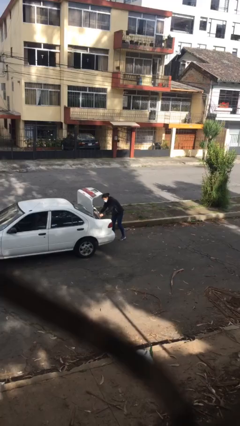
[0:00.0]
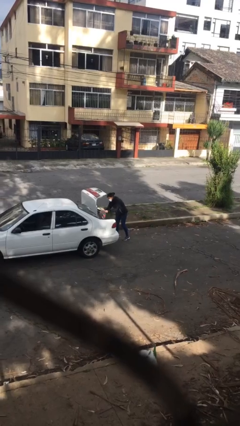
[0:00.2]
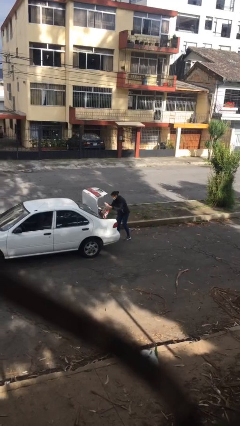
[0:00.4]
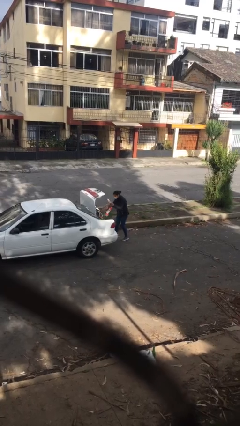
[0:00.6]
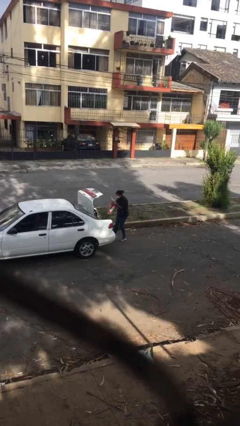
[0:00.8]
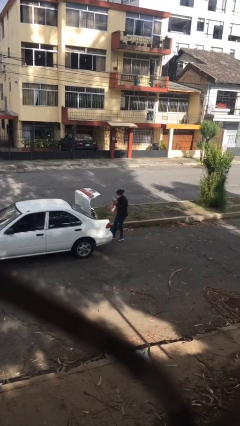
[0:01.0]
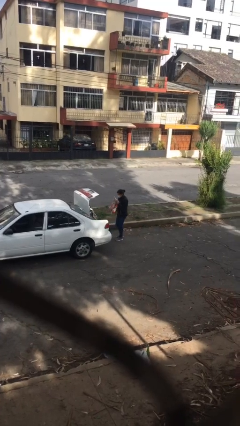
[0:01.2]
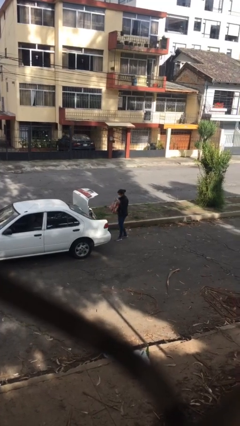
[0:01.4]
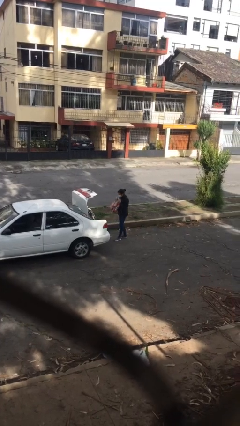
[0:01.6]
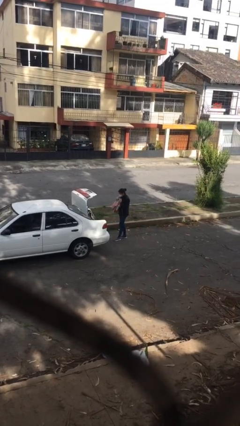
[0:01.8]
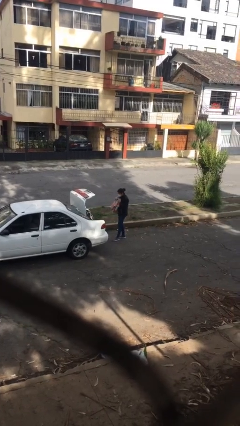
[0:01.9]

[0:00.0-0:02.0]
person unloads car

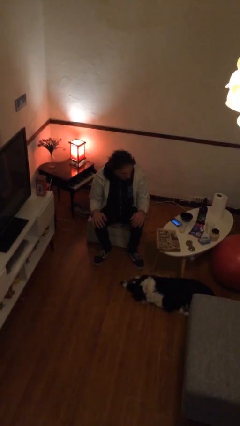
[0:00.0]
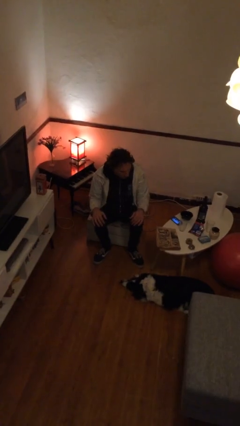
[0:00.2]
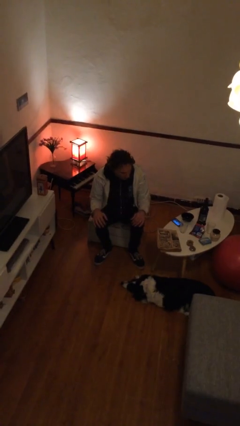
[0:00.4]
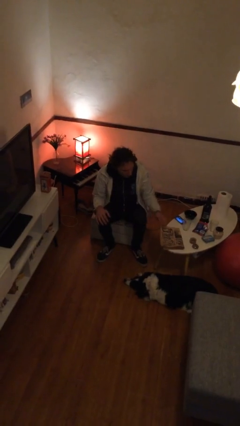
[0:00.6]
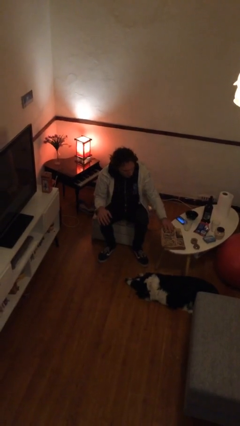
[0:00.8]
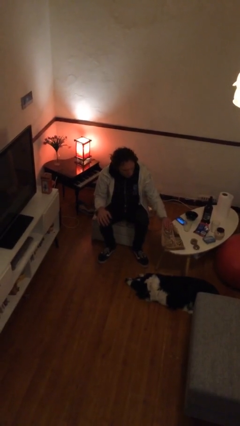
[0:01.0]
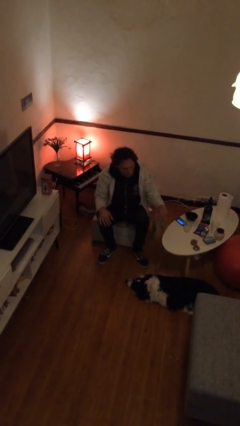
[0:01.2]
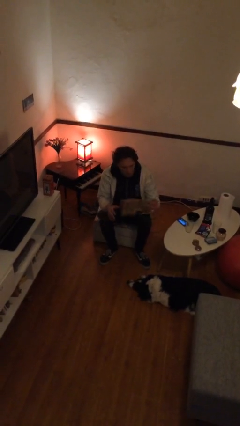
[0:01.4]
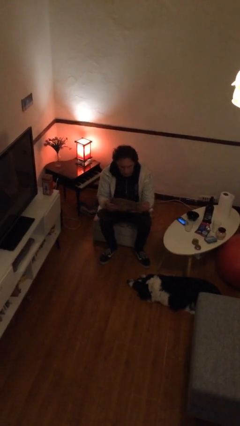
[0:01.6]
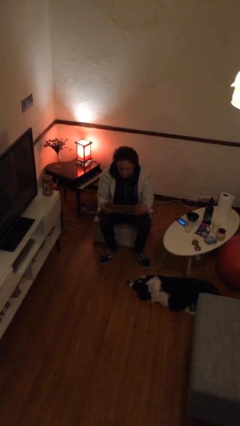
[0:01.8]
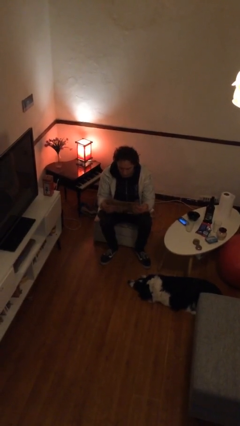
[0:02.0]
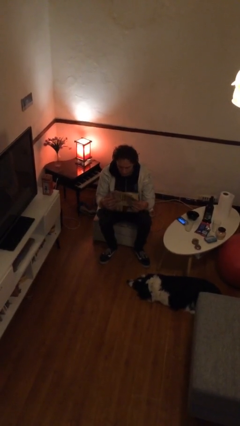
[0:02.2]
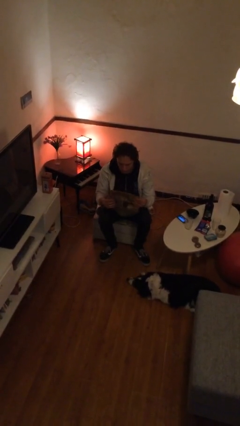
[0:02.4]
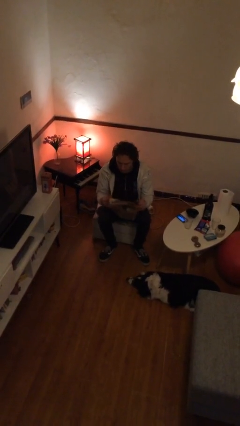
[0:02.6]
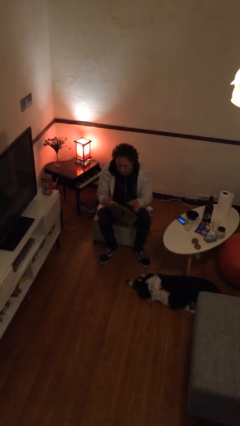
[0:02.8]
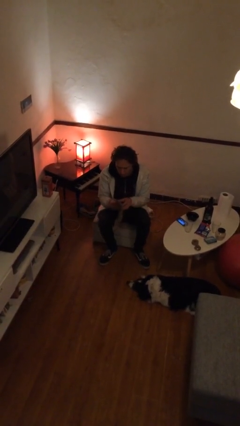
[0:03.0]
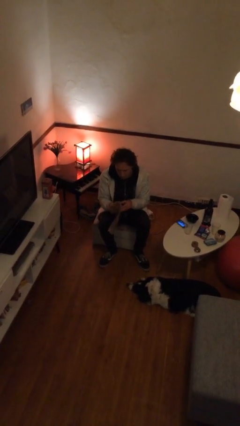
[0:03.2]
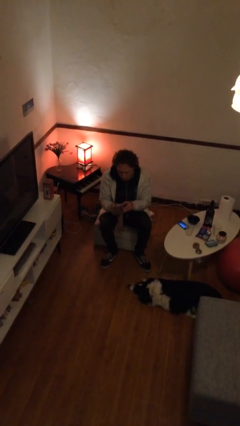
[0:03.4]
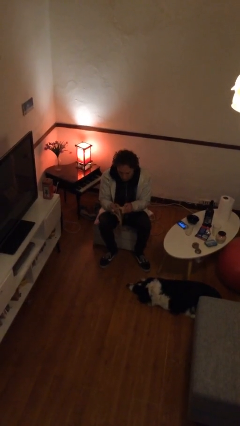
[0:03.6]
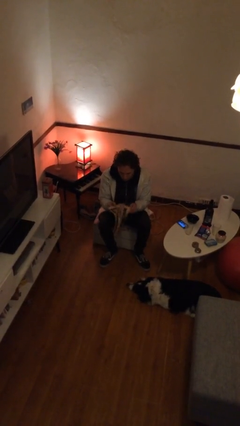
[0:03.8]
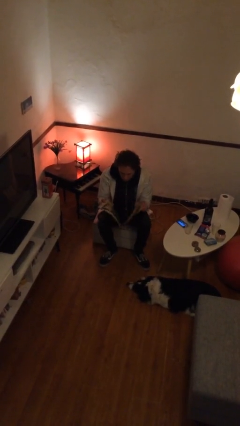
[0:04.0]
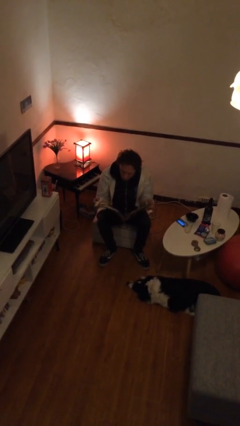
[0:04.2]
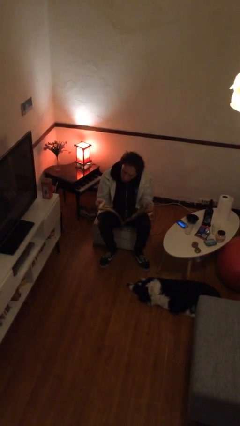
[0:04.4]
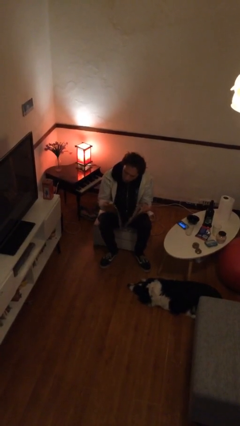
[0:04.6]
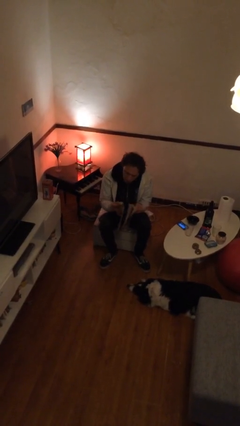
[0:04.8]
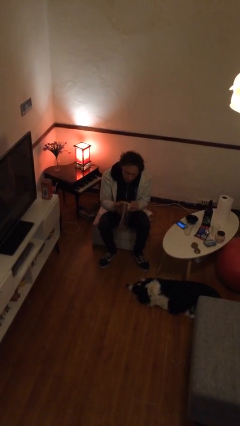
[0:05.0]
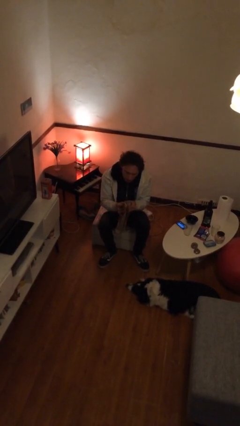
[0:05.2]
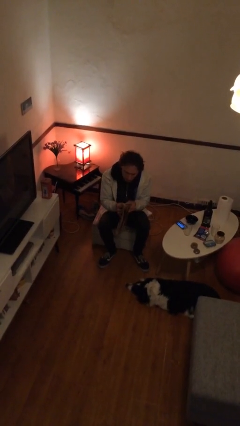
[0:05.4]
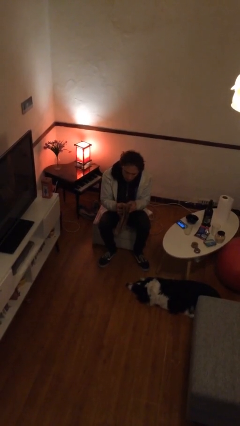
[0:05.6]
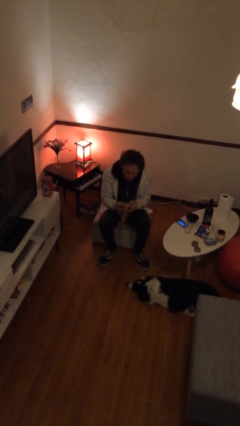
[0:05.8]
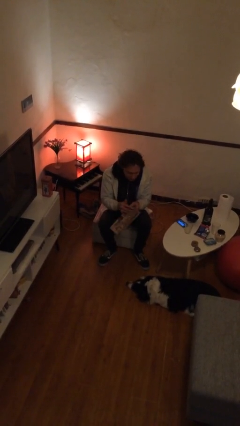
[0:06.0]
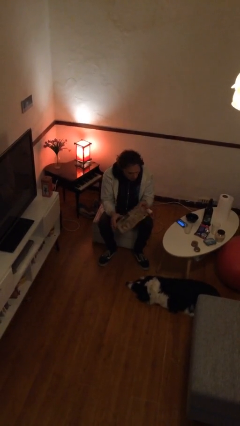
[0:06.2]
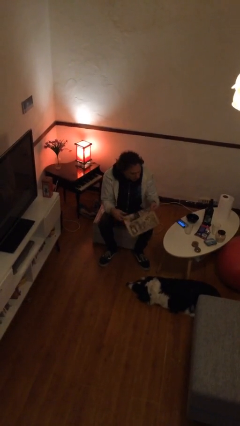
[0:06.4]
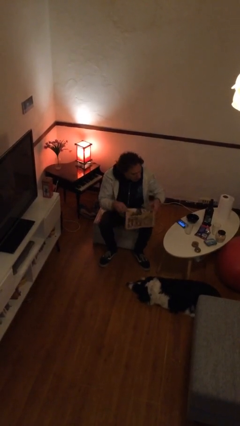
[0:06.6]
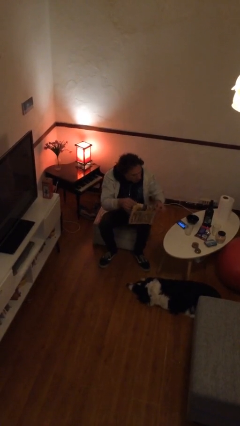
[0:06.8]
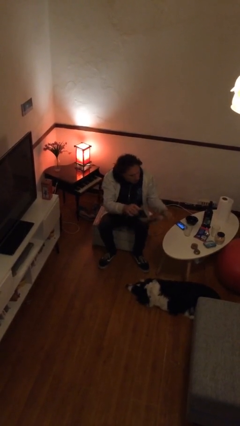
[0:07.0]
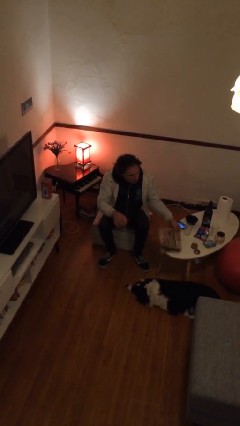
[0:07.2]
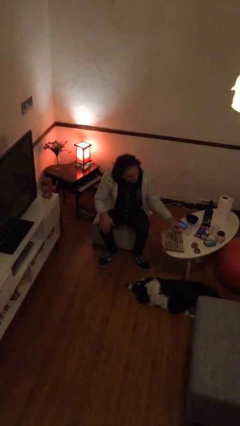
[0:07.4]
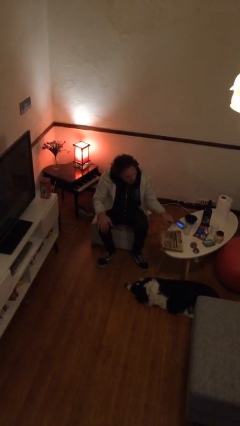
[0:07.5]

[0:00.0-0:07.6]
person reads newspaper

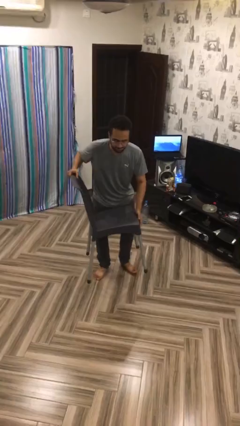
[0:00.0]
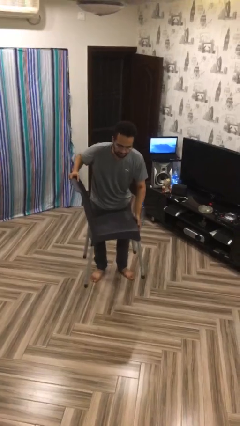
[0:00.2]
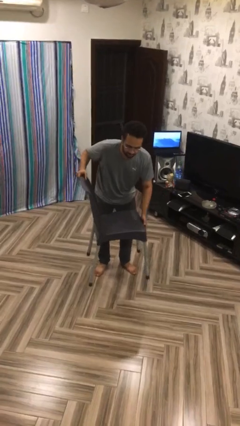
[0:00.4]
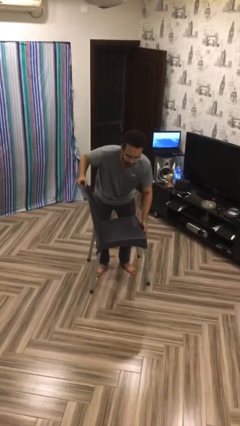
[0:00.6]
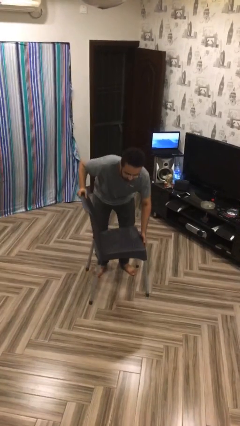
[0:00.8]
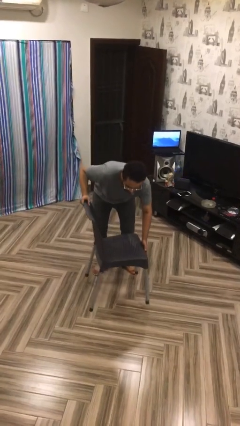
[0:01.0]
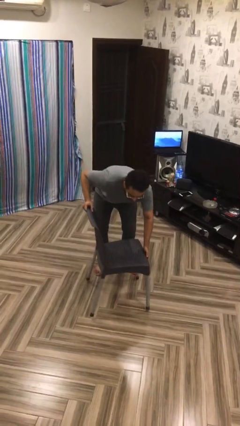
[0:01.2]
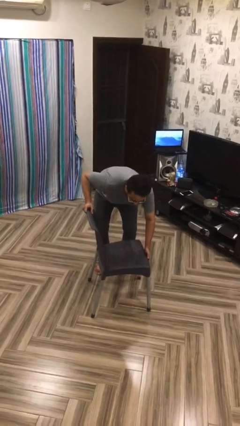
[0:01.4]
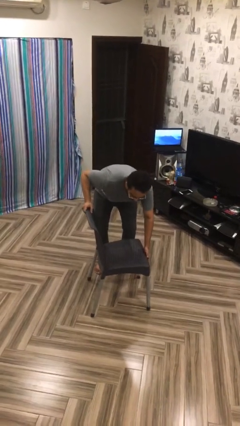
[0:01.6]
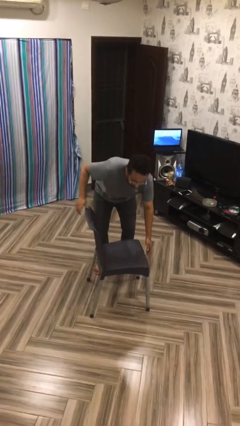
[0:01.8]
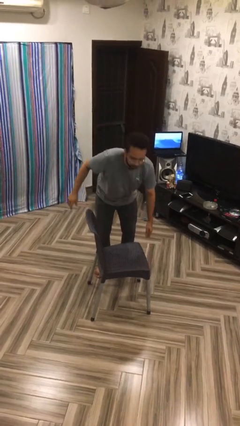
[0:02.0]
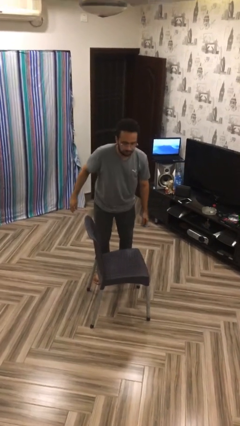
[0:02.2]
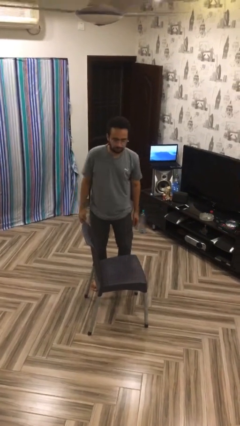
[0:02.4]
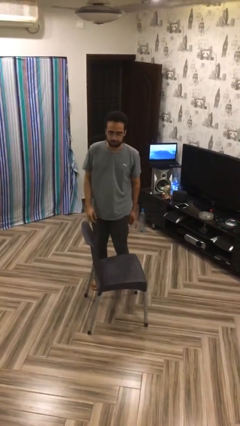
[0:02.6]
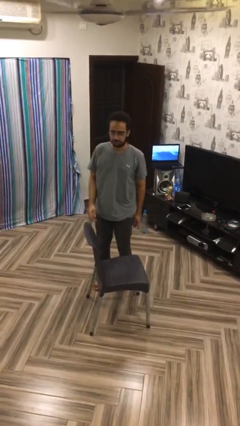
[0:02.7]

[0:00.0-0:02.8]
person puts down object on floor

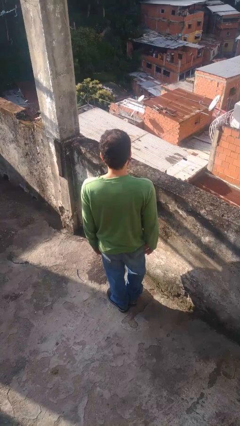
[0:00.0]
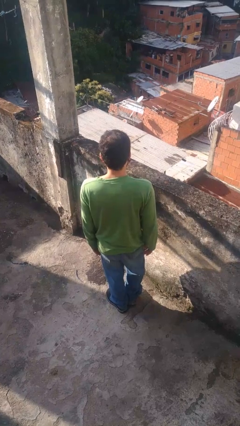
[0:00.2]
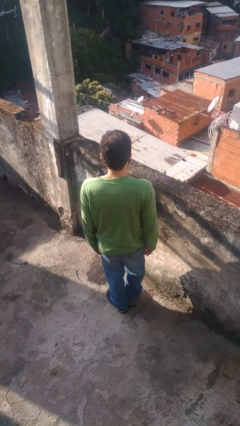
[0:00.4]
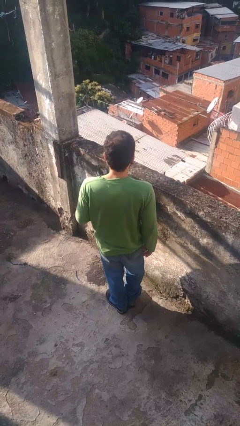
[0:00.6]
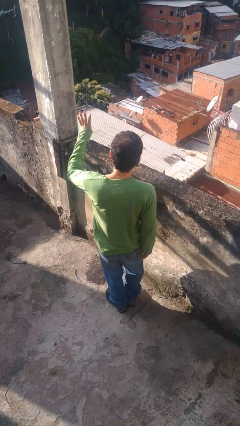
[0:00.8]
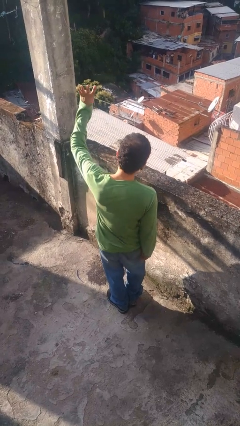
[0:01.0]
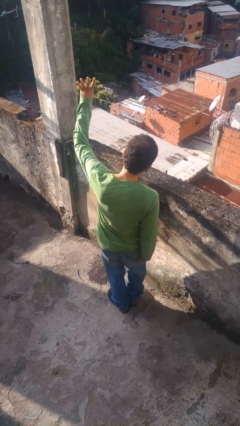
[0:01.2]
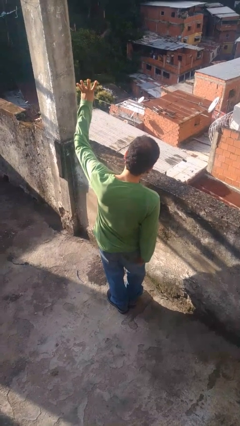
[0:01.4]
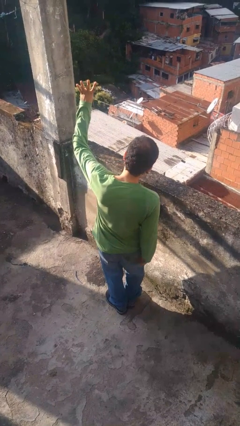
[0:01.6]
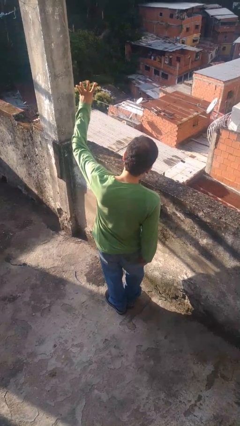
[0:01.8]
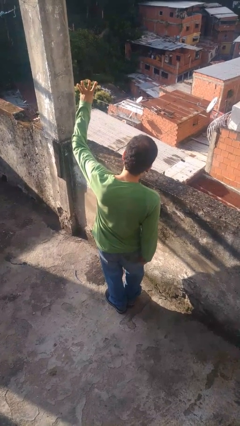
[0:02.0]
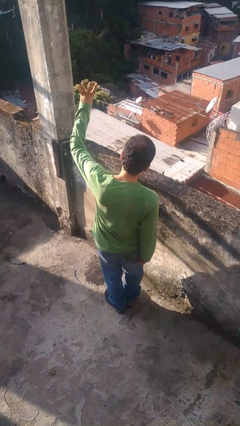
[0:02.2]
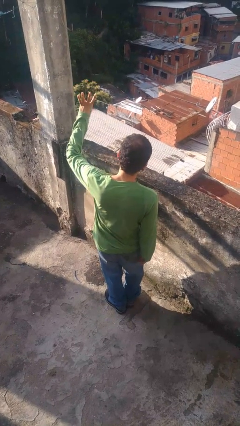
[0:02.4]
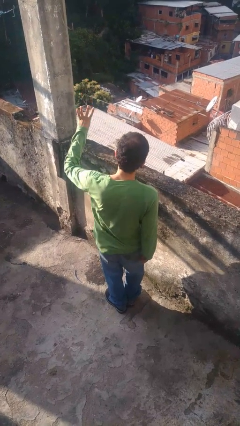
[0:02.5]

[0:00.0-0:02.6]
person gestures number four

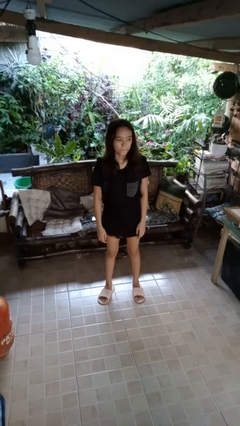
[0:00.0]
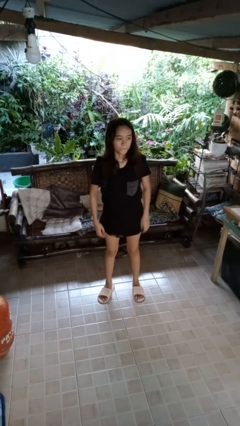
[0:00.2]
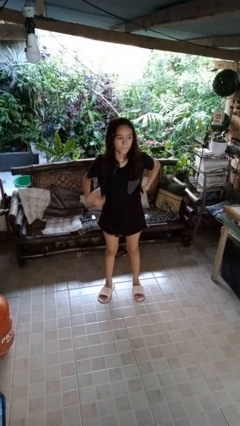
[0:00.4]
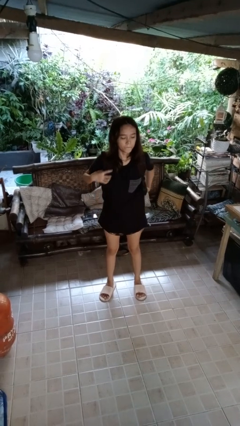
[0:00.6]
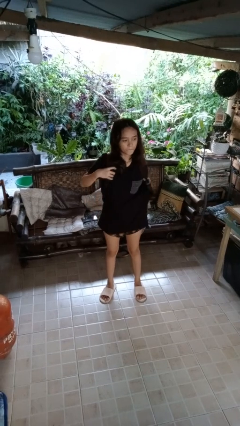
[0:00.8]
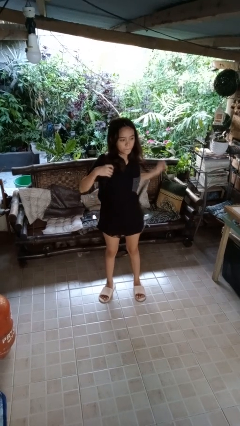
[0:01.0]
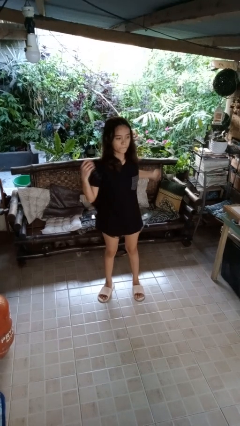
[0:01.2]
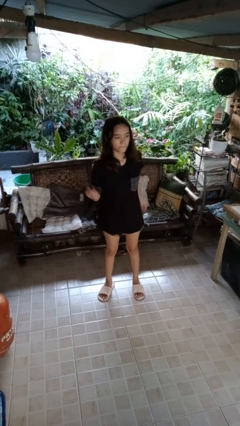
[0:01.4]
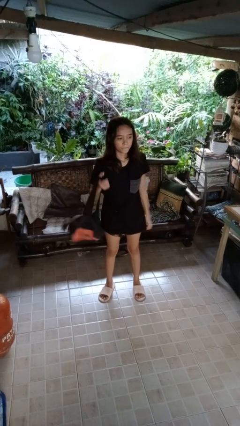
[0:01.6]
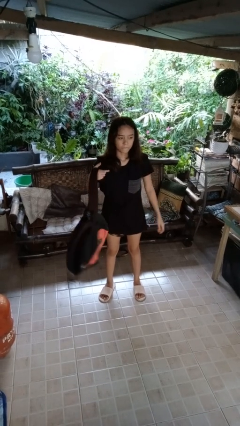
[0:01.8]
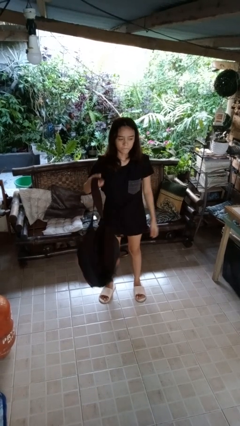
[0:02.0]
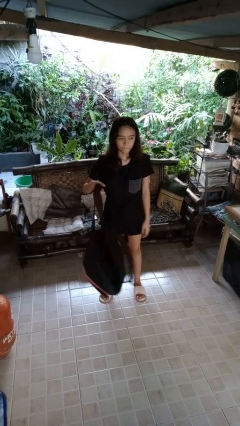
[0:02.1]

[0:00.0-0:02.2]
person takes off backpack

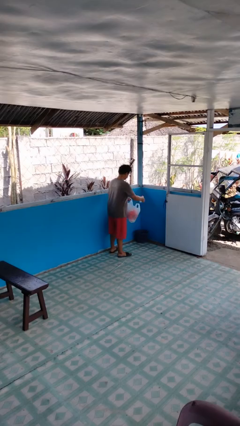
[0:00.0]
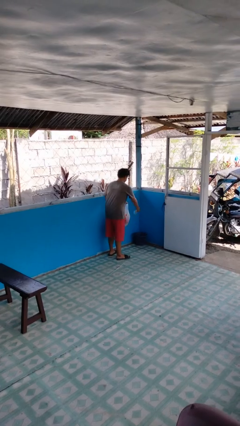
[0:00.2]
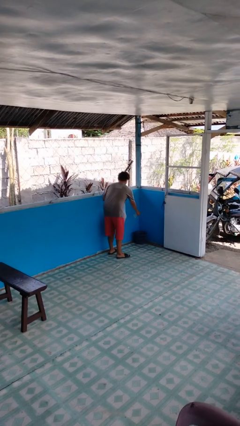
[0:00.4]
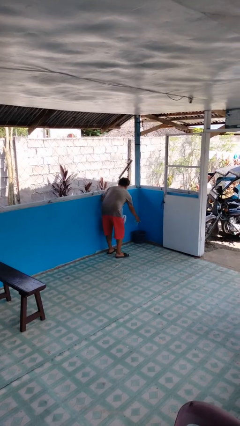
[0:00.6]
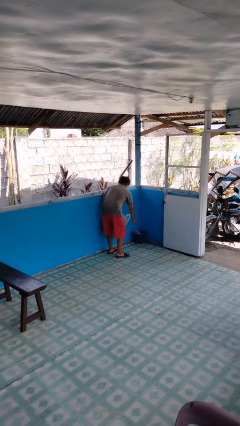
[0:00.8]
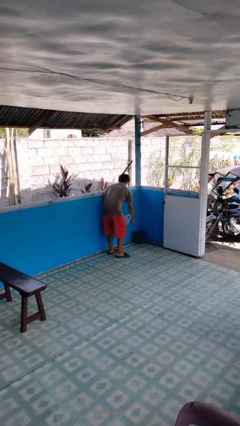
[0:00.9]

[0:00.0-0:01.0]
person discards trash
